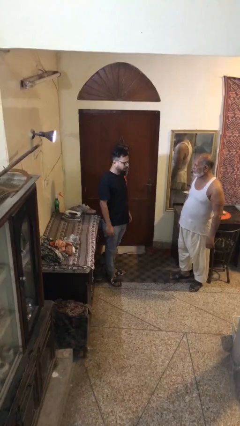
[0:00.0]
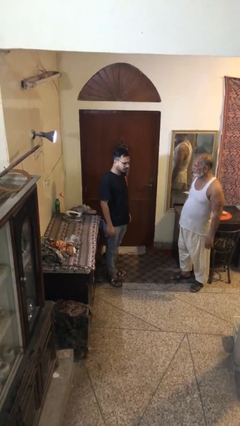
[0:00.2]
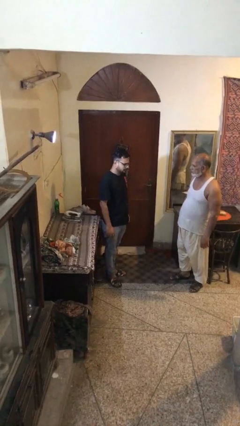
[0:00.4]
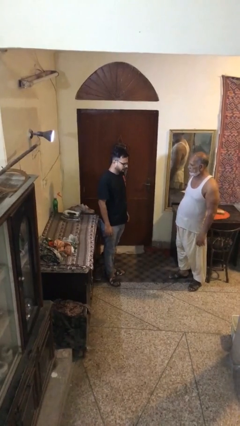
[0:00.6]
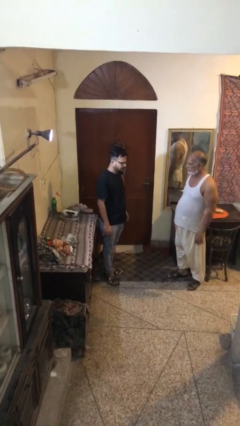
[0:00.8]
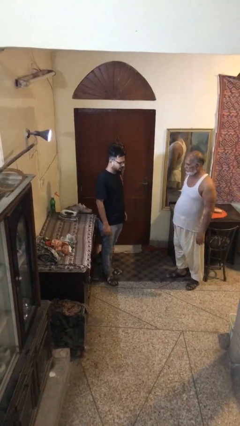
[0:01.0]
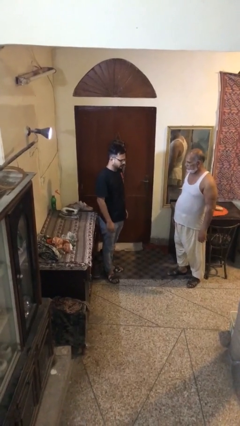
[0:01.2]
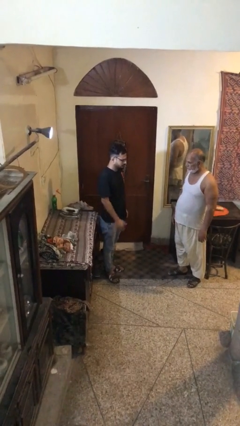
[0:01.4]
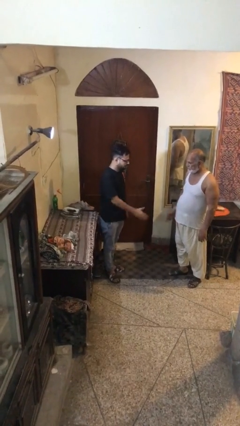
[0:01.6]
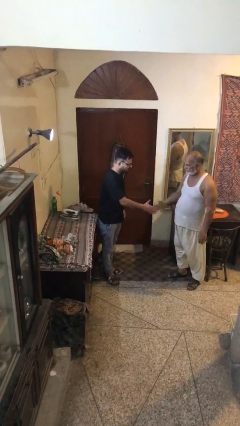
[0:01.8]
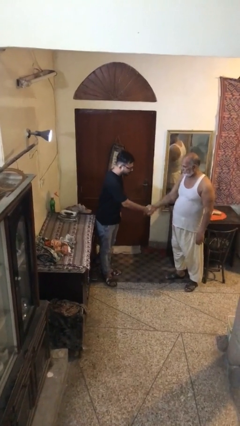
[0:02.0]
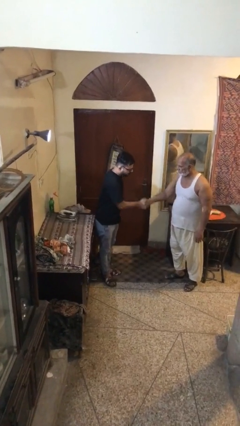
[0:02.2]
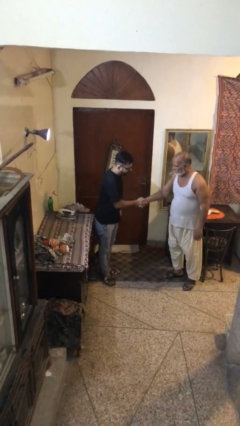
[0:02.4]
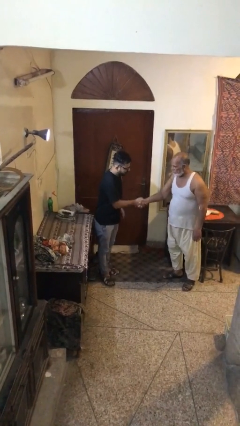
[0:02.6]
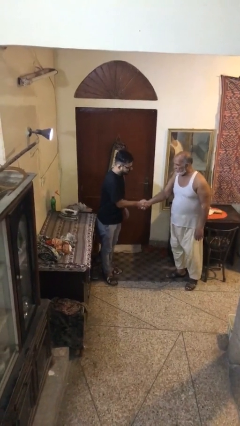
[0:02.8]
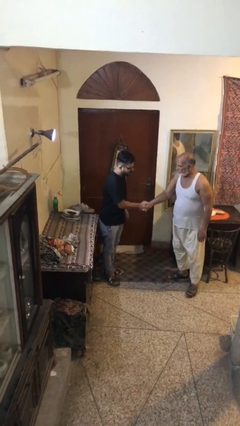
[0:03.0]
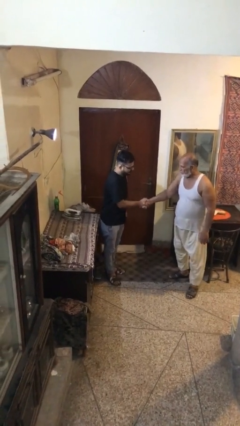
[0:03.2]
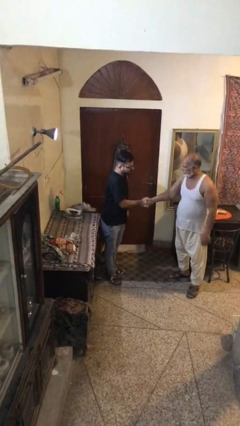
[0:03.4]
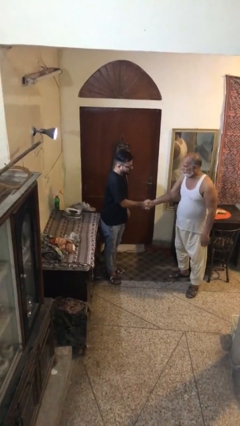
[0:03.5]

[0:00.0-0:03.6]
person shakes hand

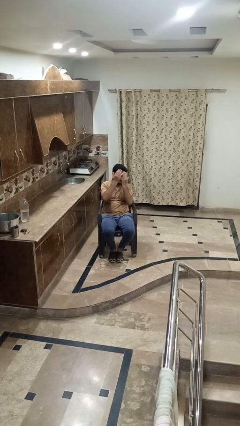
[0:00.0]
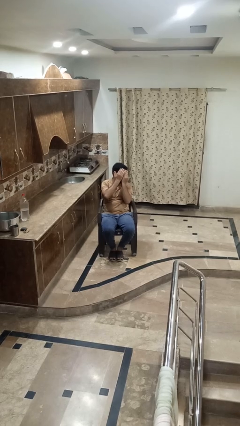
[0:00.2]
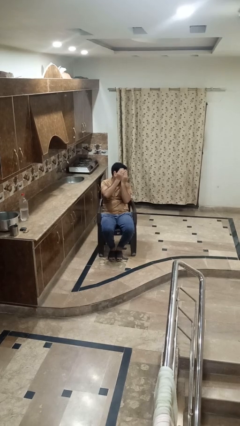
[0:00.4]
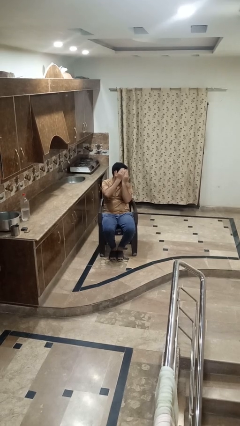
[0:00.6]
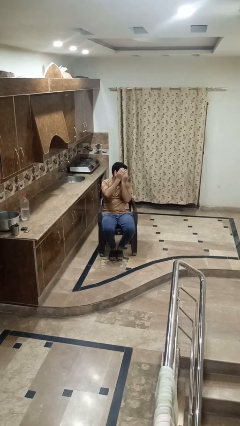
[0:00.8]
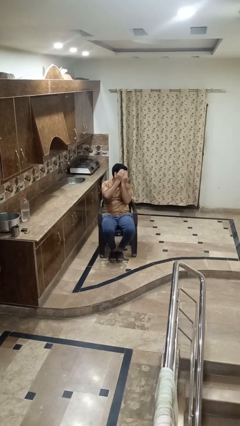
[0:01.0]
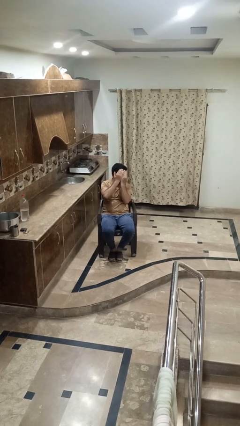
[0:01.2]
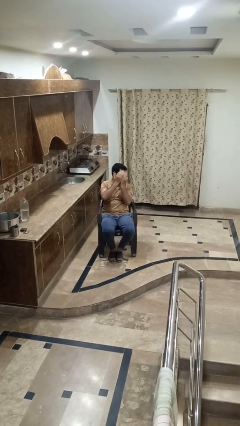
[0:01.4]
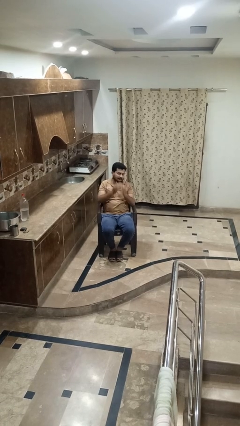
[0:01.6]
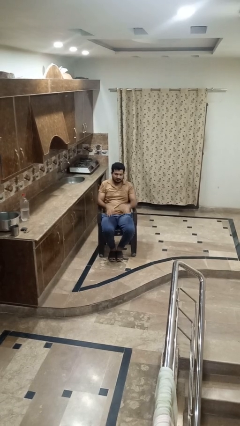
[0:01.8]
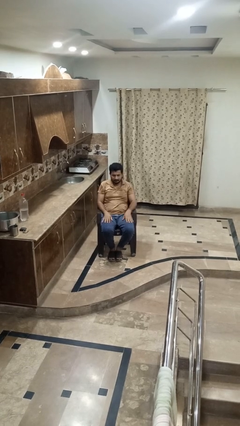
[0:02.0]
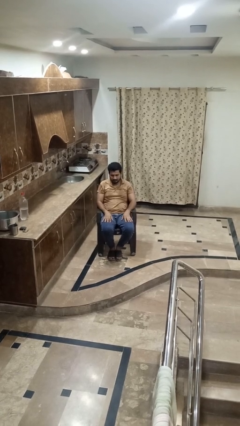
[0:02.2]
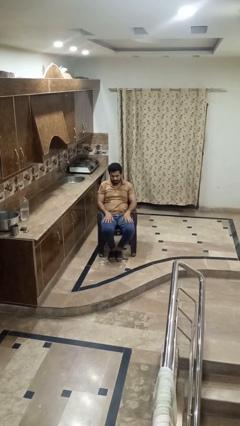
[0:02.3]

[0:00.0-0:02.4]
person covers face with hands

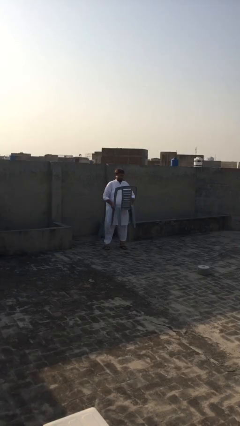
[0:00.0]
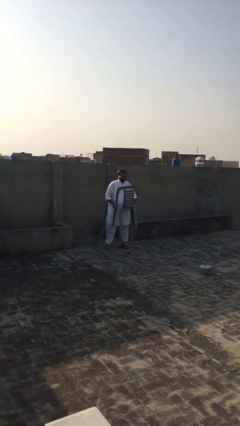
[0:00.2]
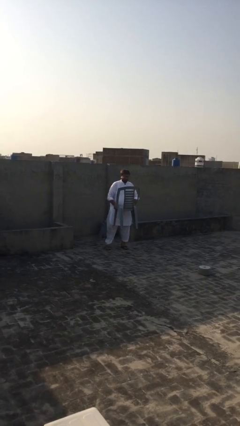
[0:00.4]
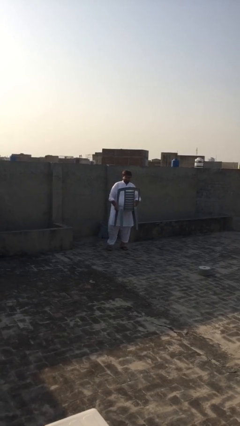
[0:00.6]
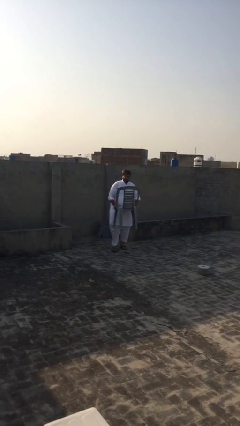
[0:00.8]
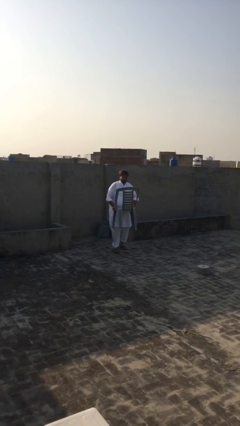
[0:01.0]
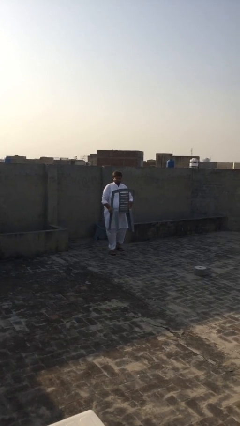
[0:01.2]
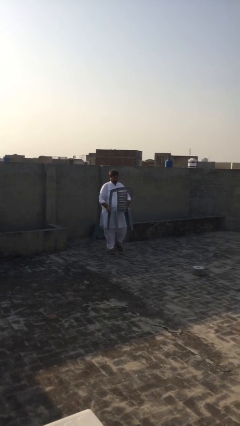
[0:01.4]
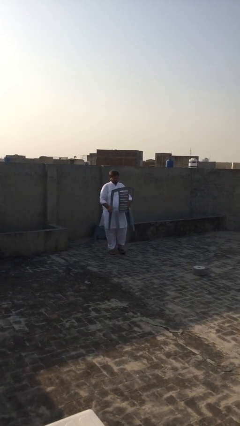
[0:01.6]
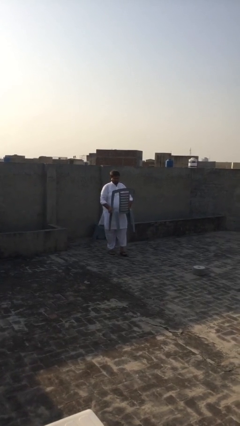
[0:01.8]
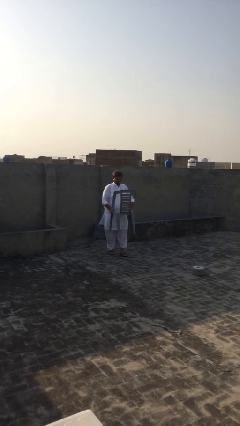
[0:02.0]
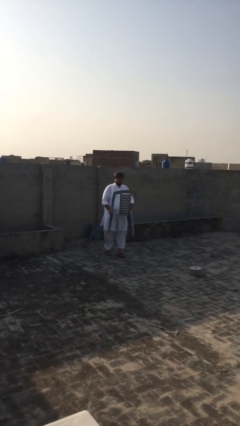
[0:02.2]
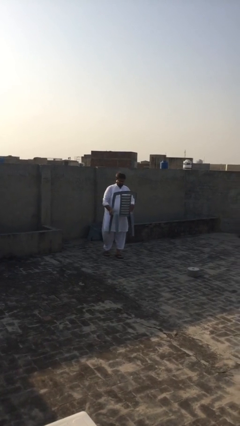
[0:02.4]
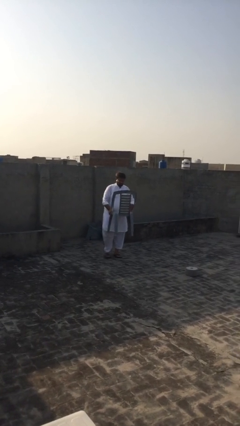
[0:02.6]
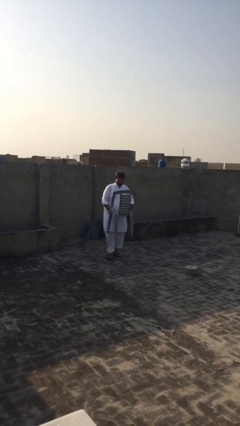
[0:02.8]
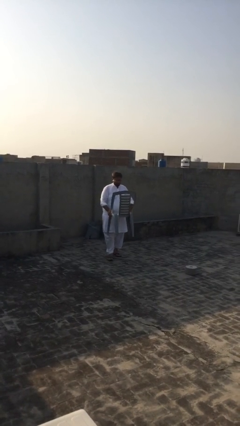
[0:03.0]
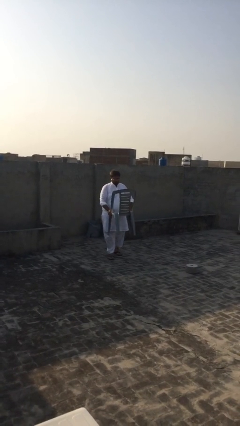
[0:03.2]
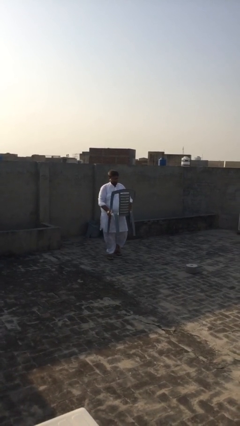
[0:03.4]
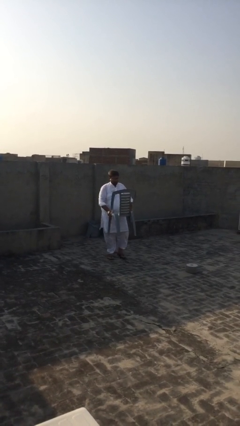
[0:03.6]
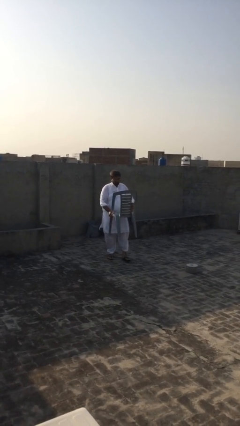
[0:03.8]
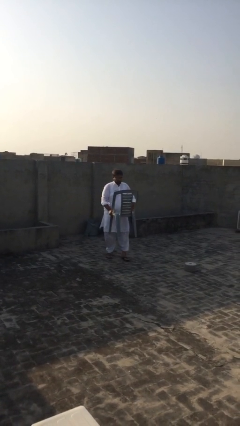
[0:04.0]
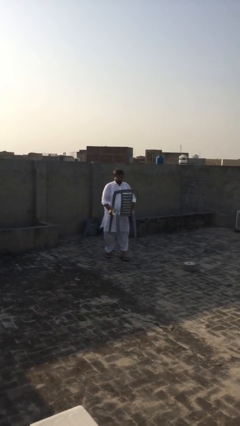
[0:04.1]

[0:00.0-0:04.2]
person carries heavy object

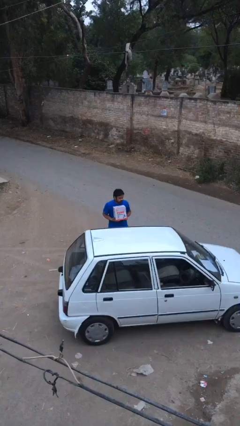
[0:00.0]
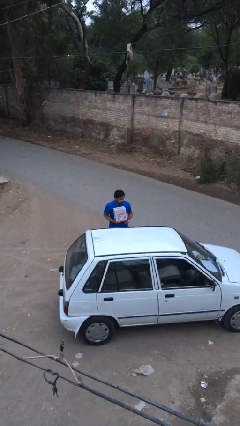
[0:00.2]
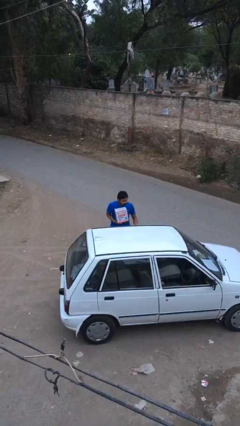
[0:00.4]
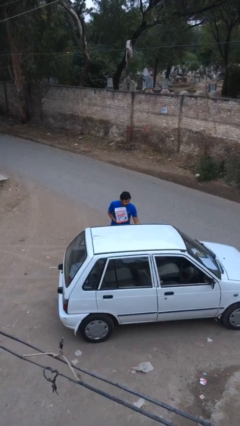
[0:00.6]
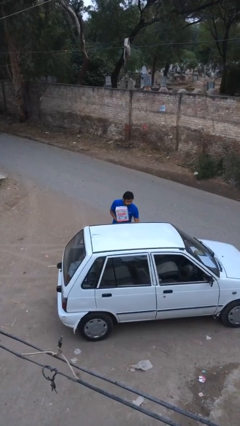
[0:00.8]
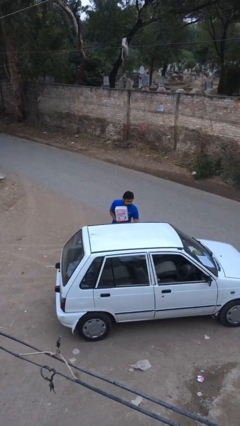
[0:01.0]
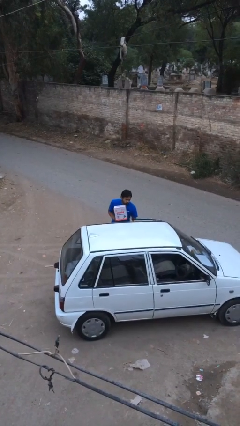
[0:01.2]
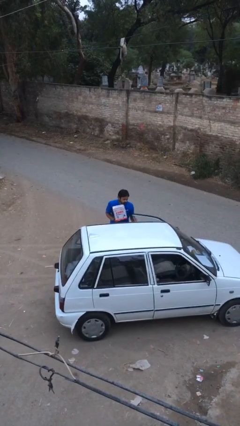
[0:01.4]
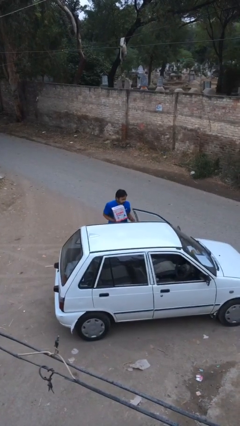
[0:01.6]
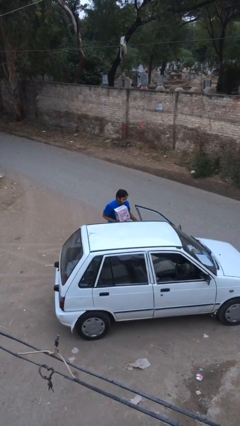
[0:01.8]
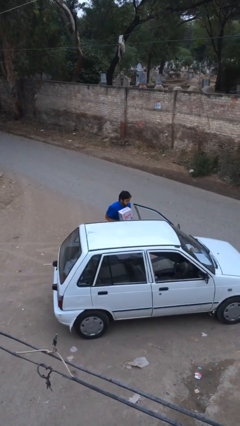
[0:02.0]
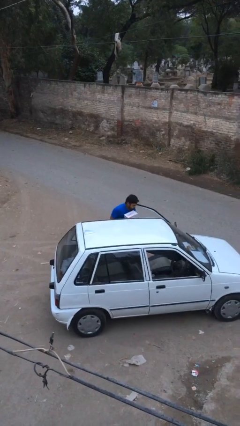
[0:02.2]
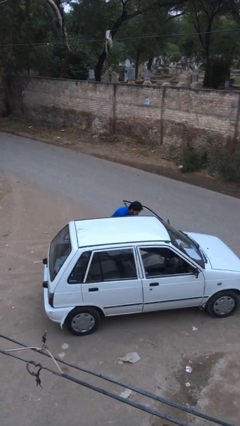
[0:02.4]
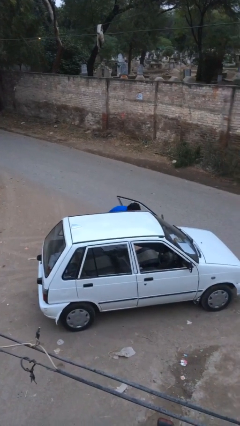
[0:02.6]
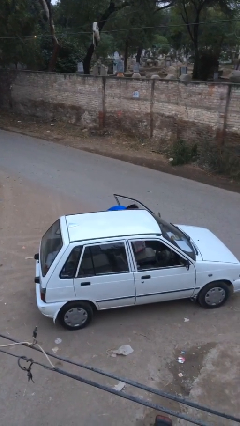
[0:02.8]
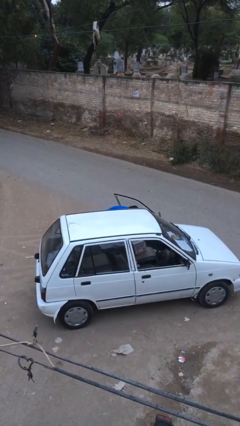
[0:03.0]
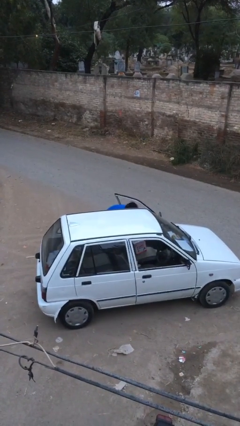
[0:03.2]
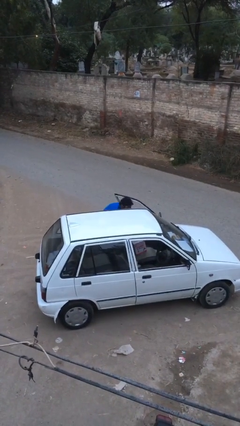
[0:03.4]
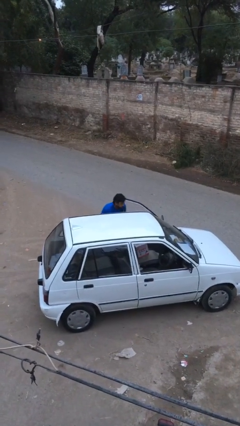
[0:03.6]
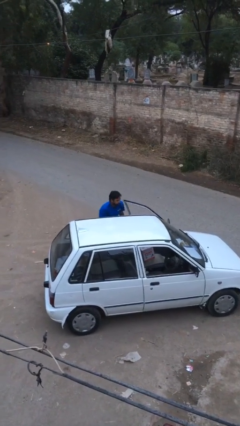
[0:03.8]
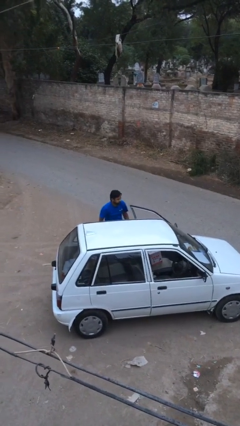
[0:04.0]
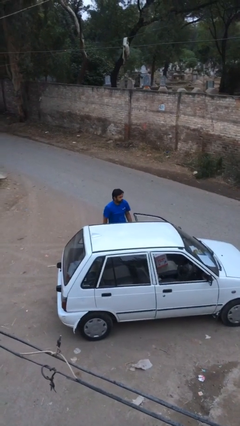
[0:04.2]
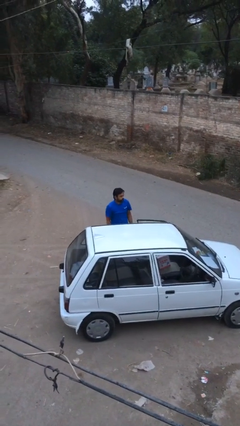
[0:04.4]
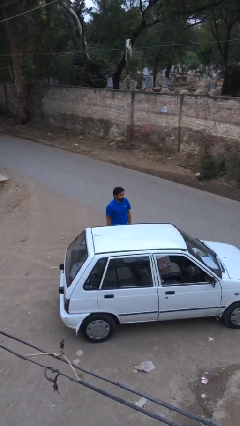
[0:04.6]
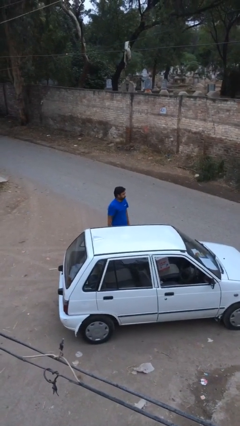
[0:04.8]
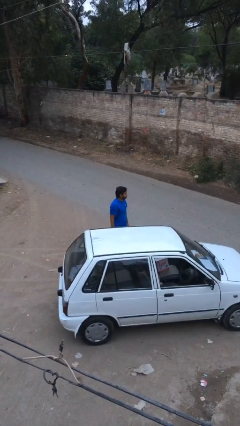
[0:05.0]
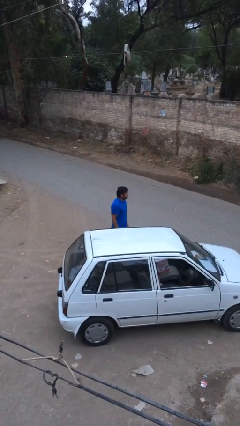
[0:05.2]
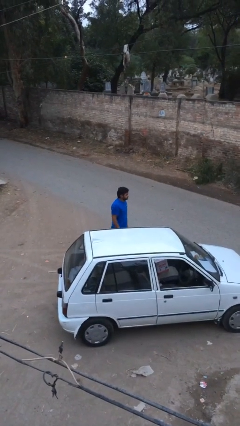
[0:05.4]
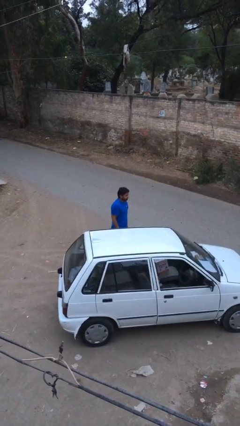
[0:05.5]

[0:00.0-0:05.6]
person loads car

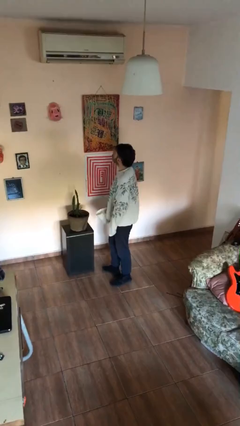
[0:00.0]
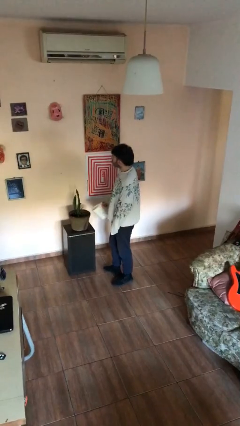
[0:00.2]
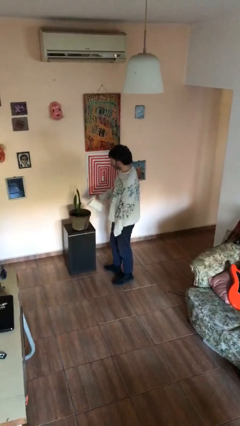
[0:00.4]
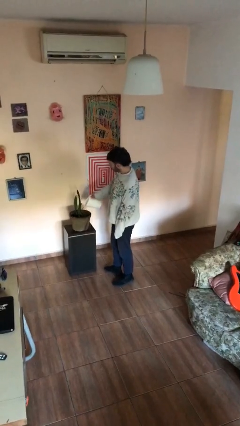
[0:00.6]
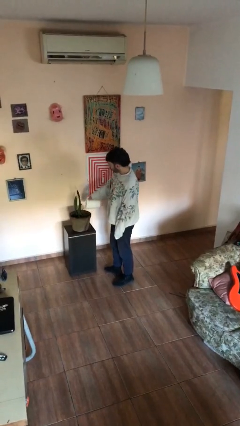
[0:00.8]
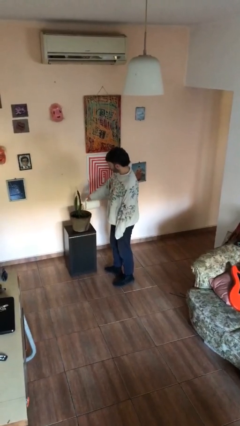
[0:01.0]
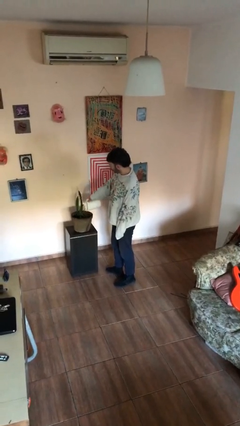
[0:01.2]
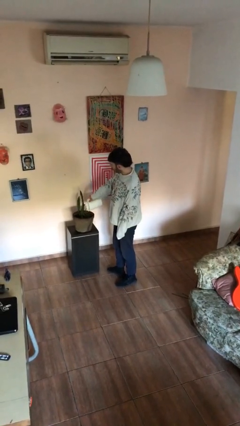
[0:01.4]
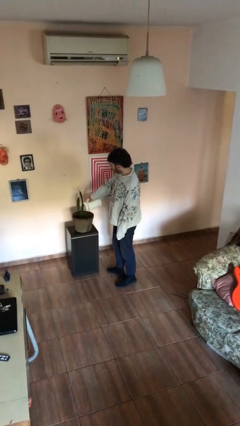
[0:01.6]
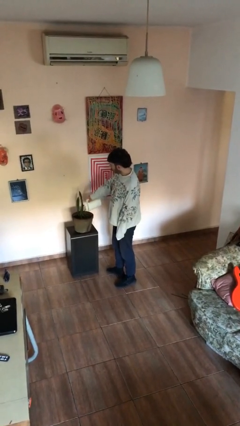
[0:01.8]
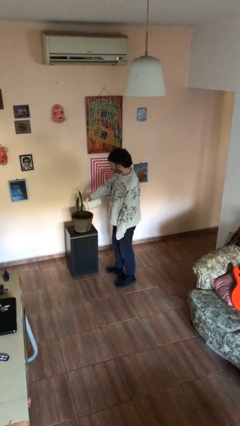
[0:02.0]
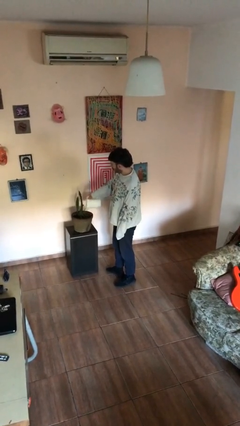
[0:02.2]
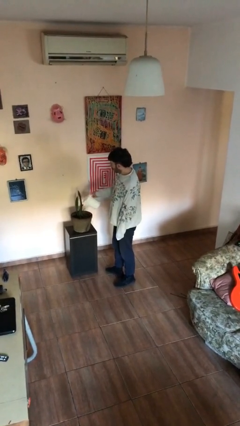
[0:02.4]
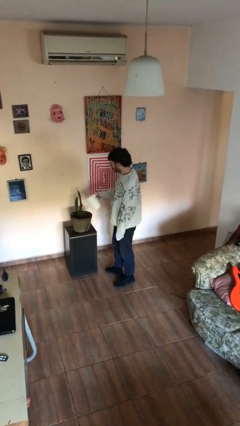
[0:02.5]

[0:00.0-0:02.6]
person waters houseplant
